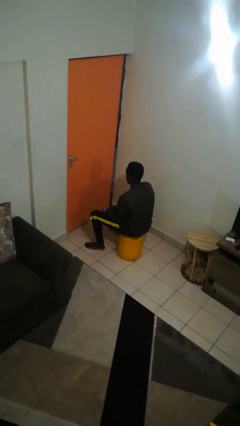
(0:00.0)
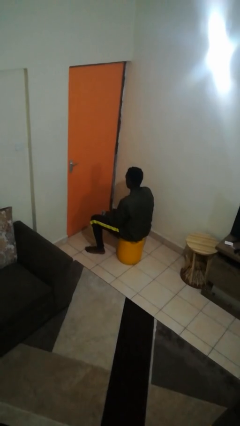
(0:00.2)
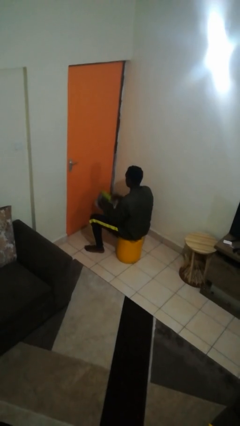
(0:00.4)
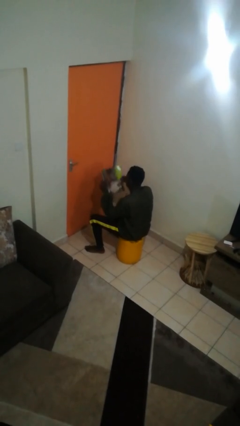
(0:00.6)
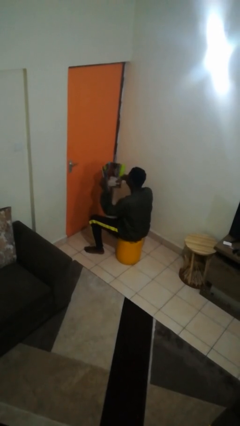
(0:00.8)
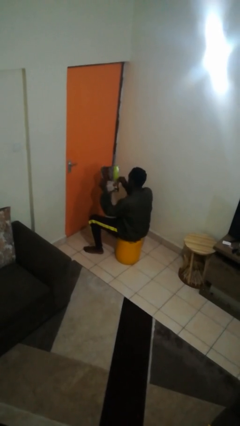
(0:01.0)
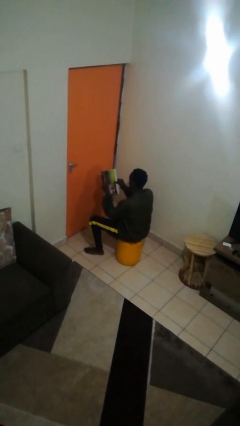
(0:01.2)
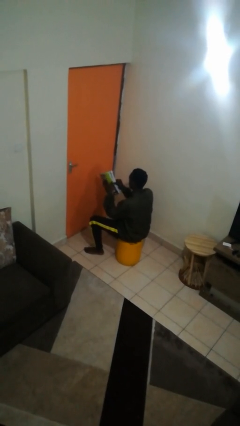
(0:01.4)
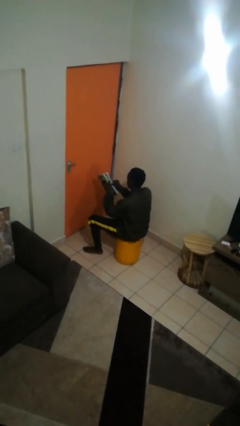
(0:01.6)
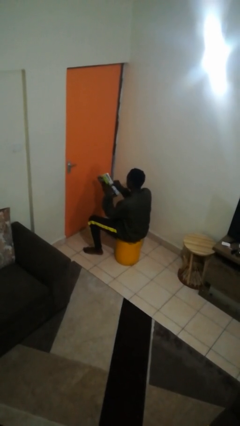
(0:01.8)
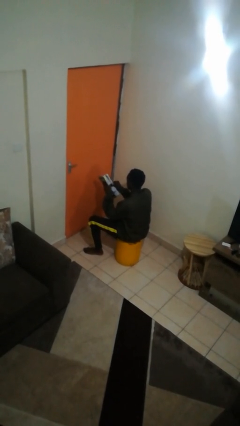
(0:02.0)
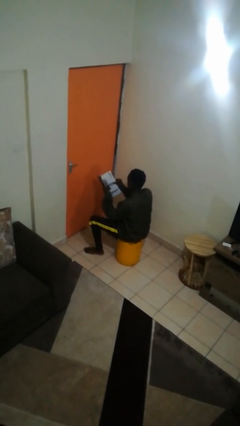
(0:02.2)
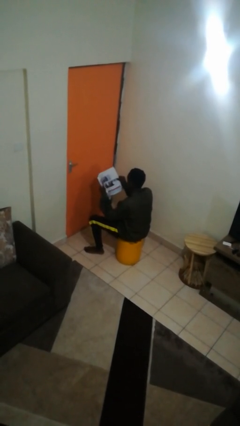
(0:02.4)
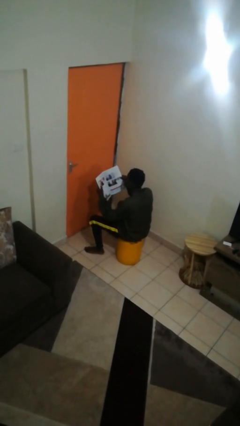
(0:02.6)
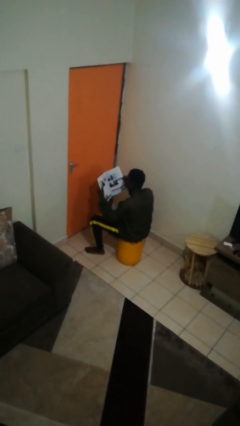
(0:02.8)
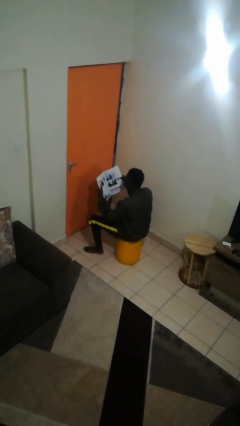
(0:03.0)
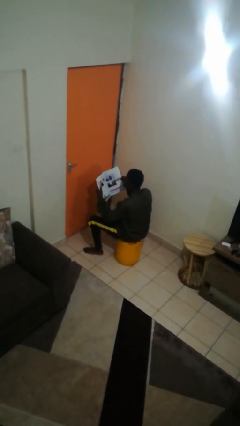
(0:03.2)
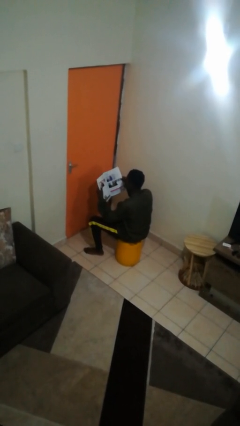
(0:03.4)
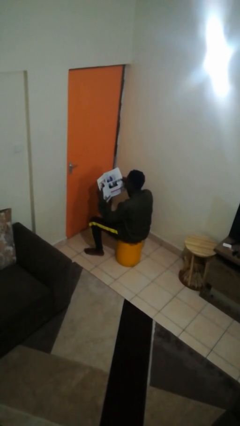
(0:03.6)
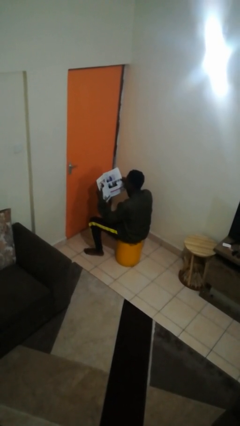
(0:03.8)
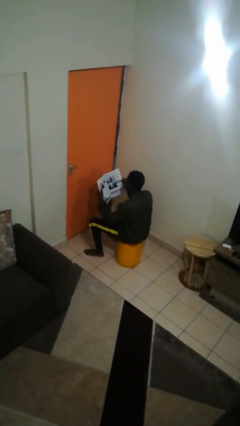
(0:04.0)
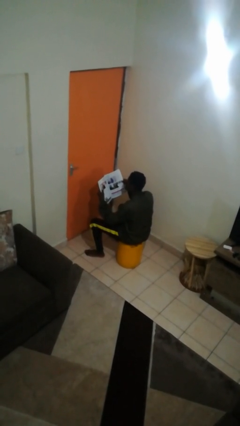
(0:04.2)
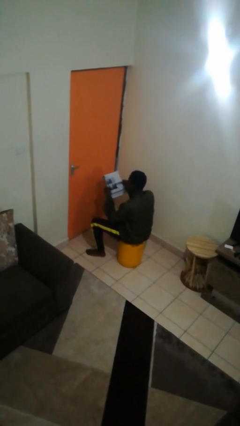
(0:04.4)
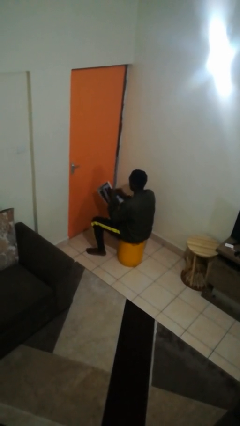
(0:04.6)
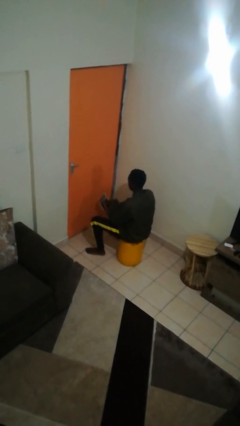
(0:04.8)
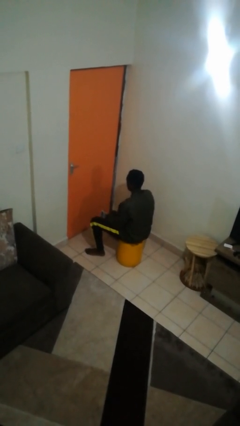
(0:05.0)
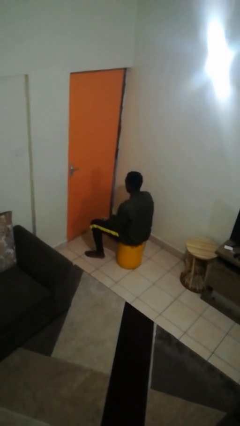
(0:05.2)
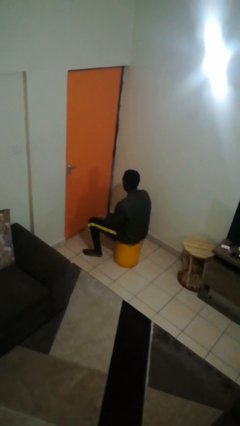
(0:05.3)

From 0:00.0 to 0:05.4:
person reads magazine

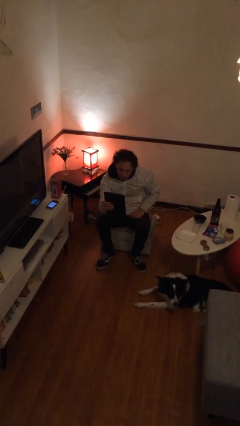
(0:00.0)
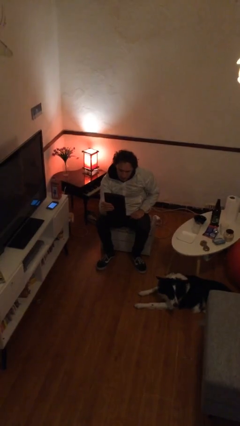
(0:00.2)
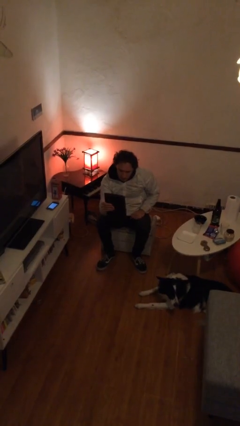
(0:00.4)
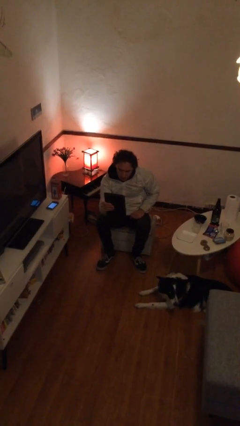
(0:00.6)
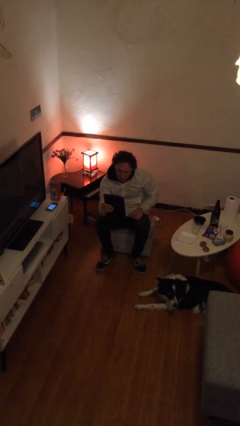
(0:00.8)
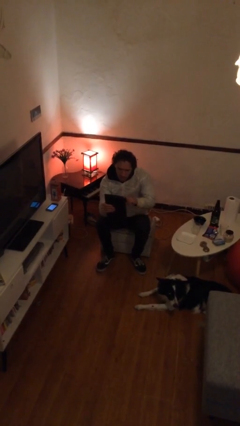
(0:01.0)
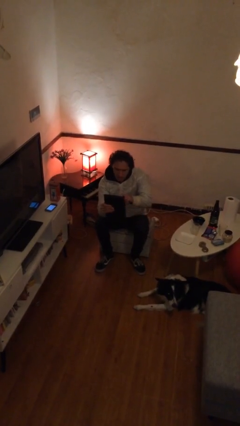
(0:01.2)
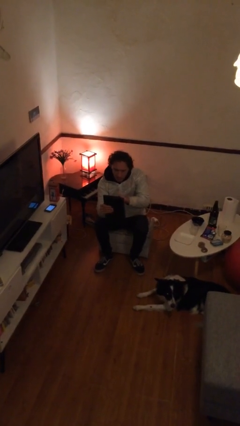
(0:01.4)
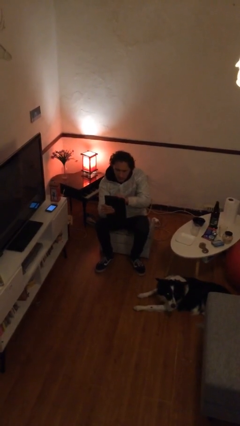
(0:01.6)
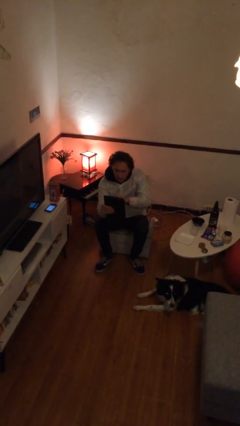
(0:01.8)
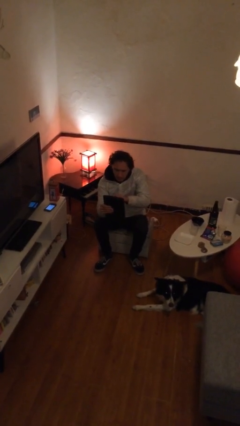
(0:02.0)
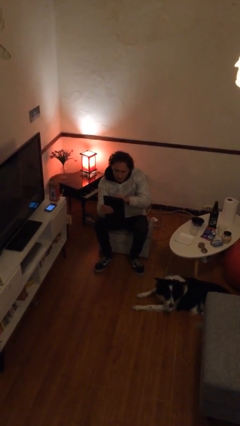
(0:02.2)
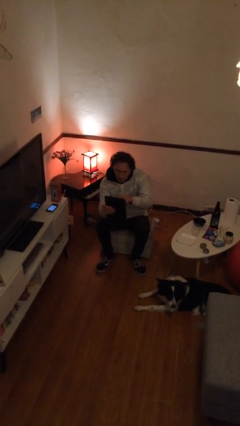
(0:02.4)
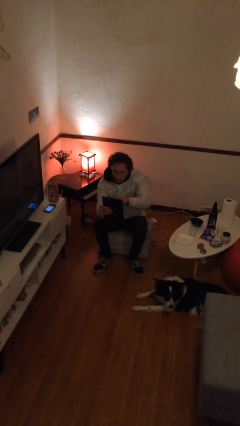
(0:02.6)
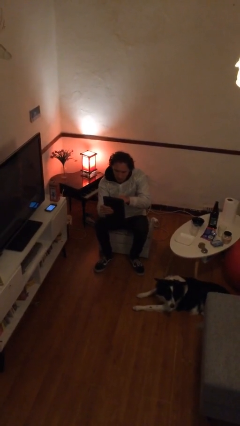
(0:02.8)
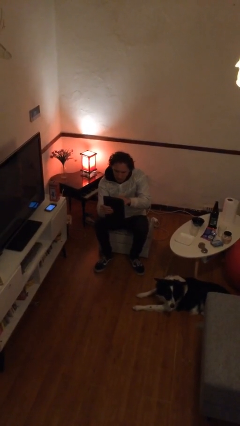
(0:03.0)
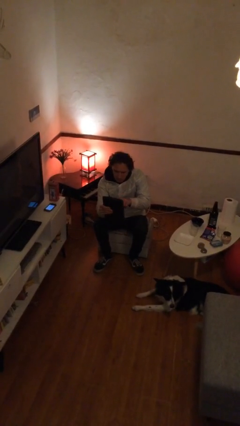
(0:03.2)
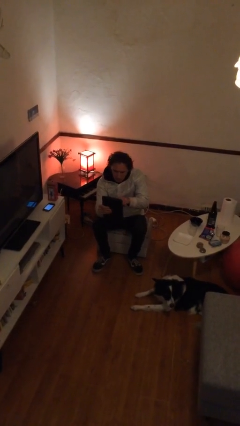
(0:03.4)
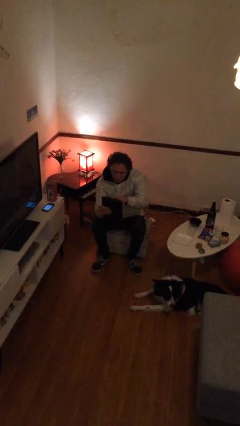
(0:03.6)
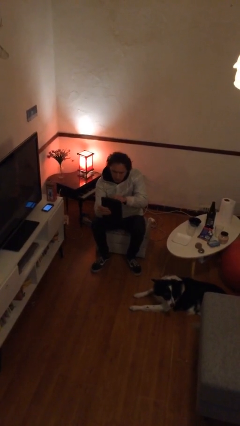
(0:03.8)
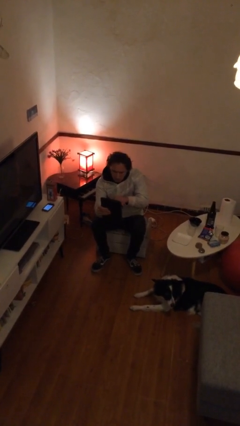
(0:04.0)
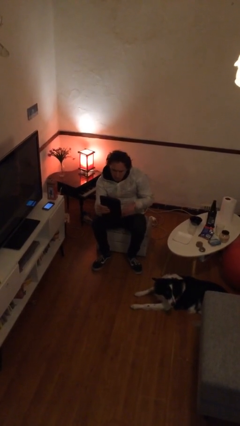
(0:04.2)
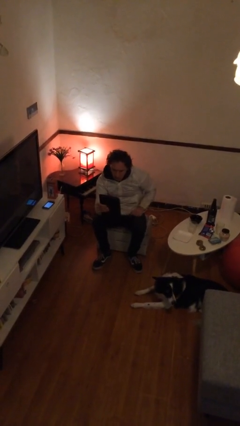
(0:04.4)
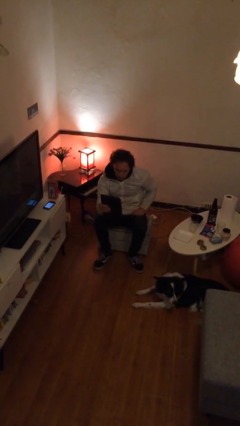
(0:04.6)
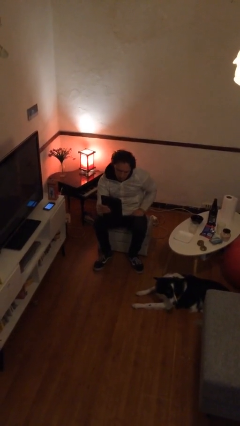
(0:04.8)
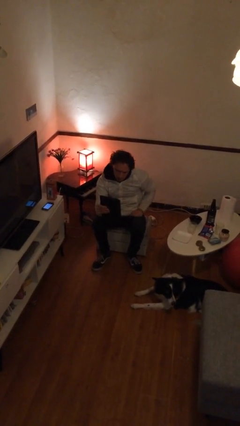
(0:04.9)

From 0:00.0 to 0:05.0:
person interacts with tablet

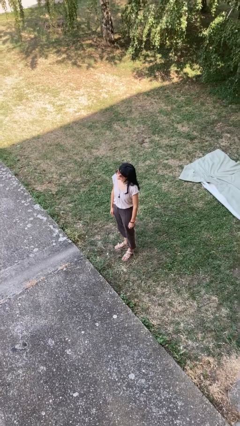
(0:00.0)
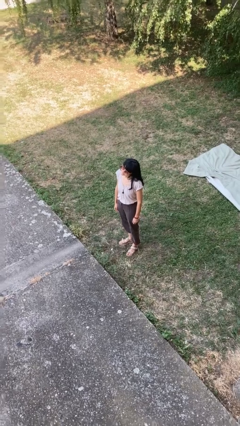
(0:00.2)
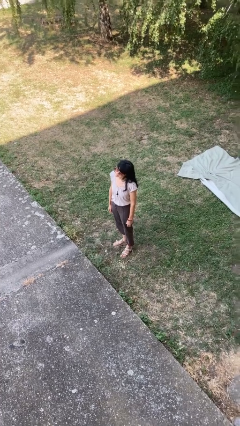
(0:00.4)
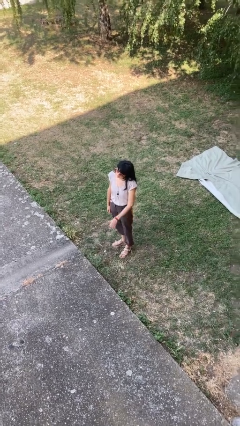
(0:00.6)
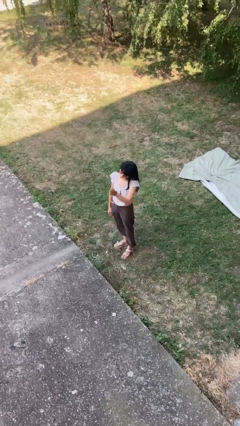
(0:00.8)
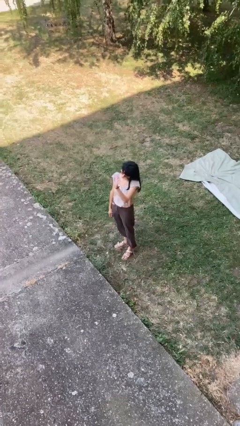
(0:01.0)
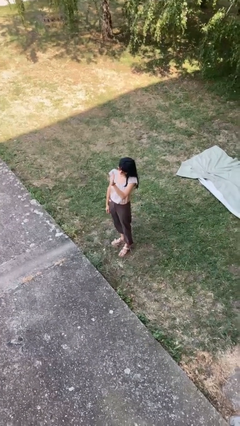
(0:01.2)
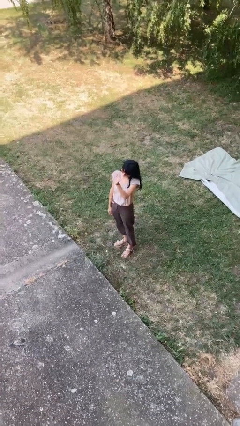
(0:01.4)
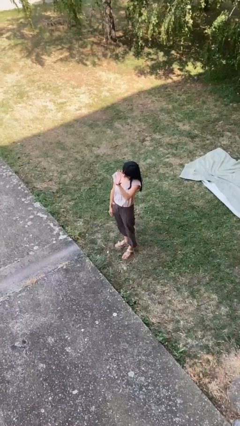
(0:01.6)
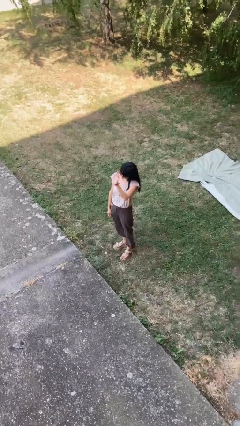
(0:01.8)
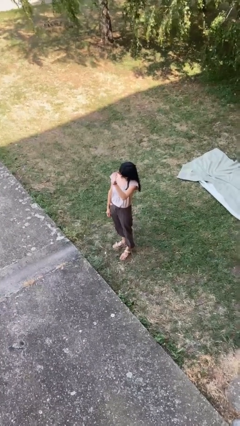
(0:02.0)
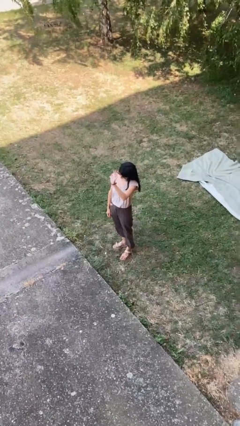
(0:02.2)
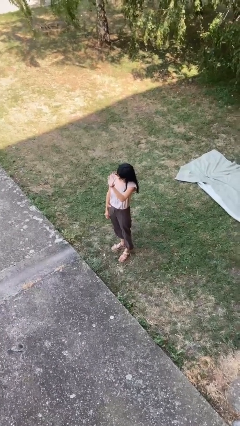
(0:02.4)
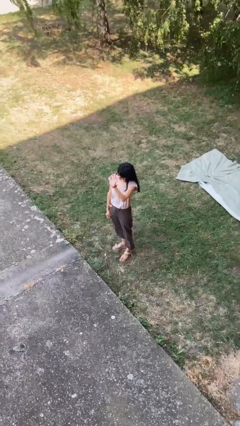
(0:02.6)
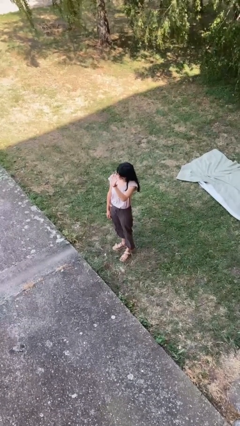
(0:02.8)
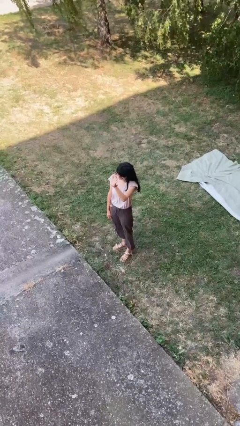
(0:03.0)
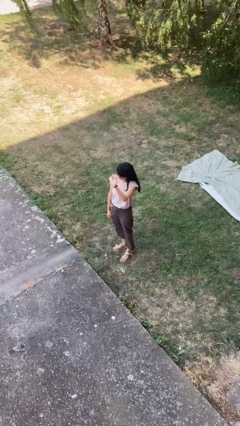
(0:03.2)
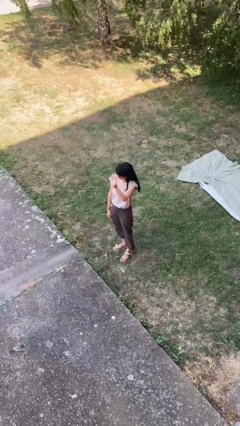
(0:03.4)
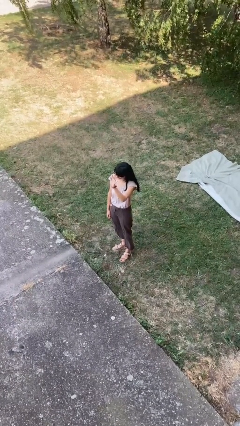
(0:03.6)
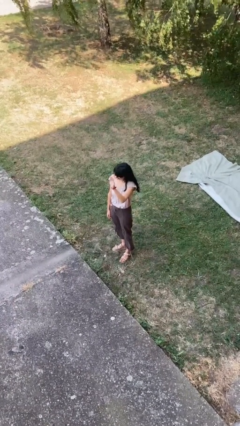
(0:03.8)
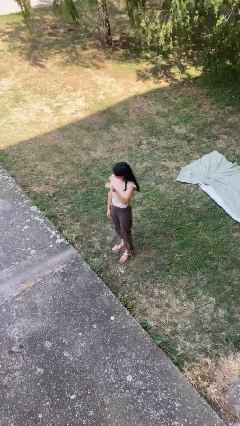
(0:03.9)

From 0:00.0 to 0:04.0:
person waves at person

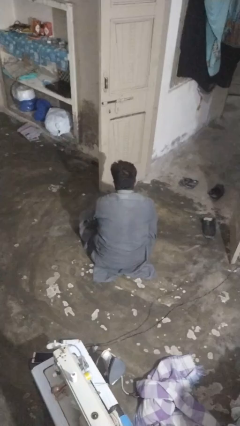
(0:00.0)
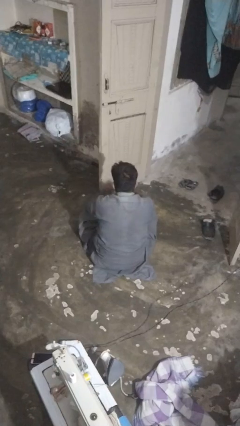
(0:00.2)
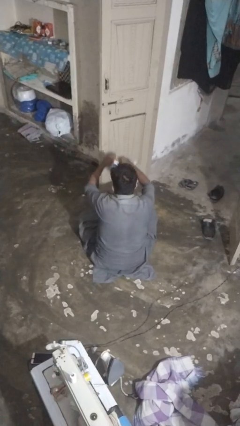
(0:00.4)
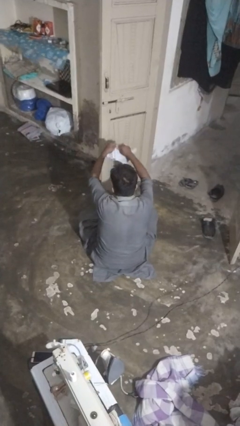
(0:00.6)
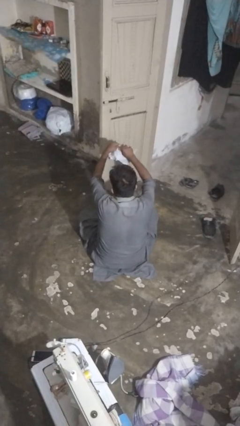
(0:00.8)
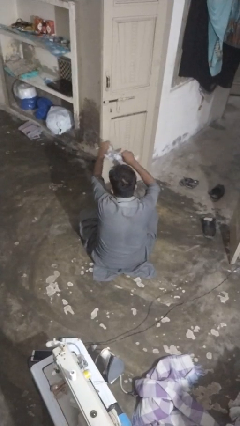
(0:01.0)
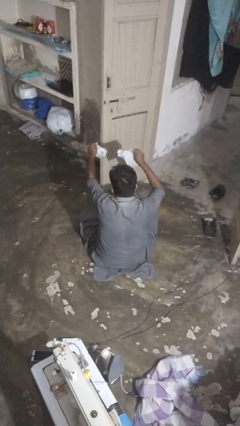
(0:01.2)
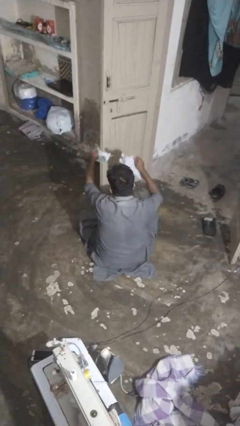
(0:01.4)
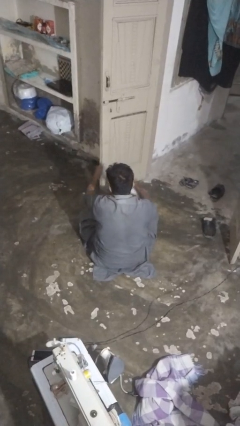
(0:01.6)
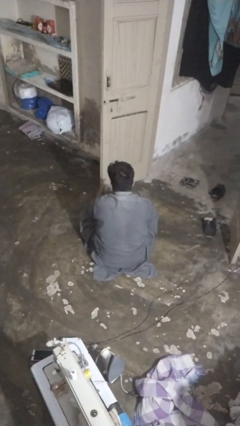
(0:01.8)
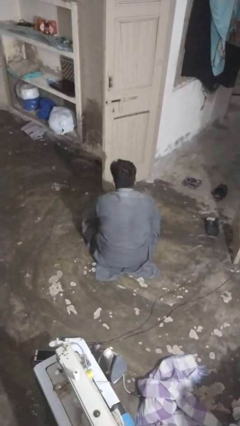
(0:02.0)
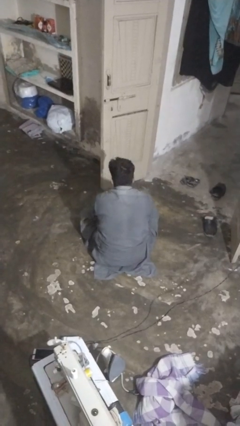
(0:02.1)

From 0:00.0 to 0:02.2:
person tears paper

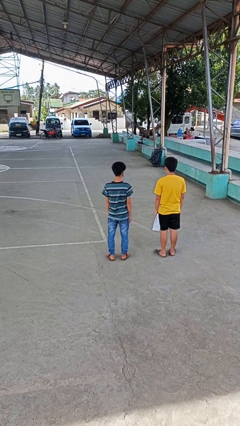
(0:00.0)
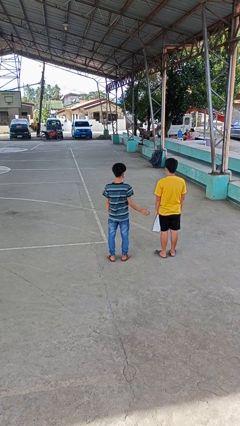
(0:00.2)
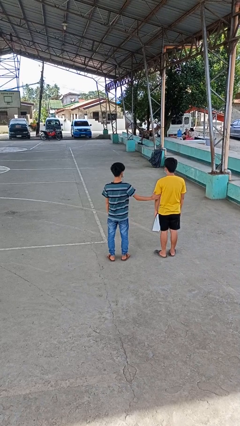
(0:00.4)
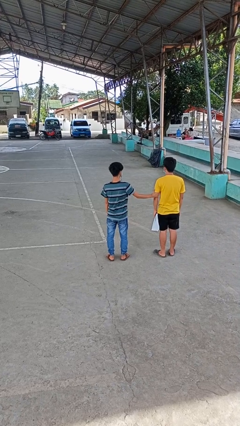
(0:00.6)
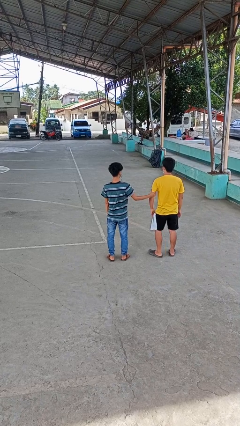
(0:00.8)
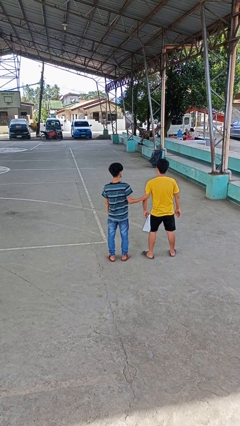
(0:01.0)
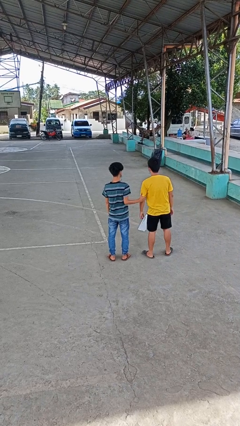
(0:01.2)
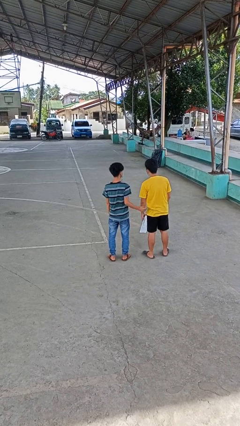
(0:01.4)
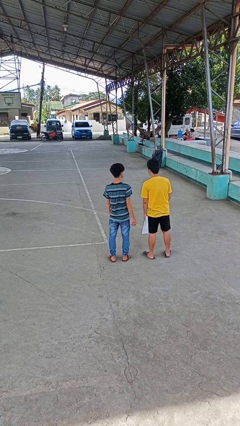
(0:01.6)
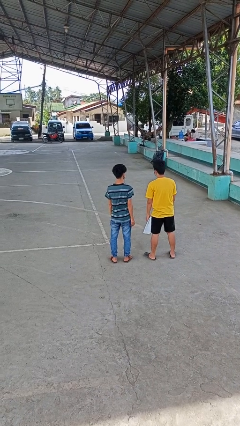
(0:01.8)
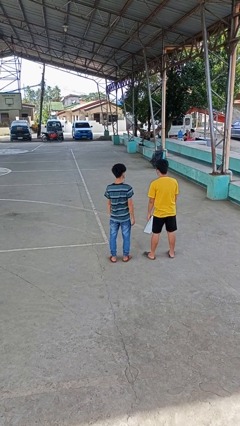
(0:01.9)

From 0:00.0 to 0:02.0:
person grabs person by bicep
